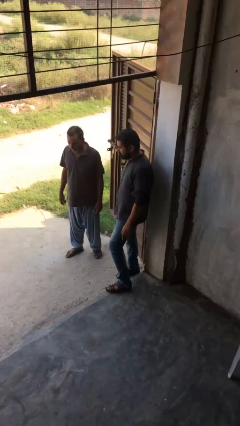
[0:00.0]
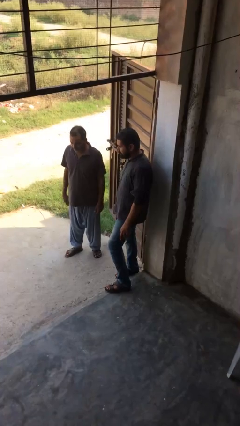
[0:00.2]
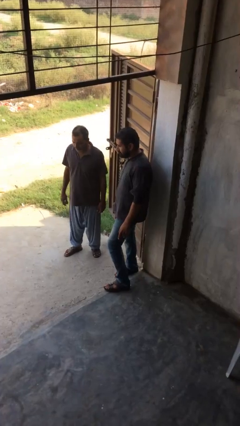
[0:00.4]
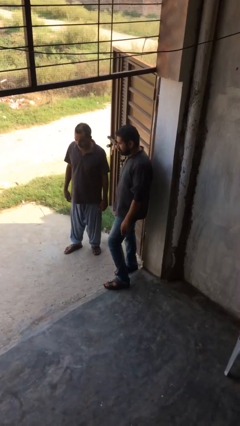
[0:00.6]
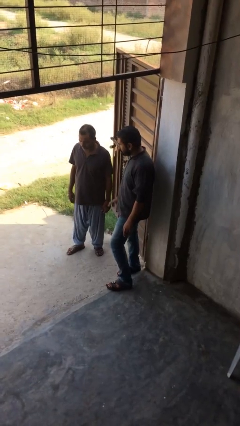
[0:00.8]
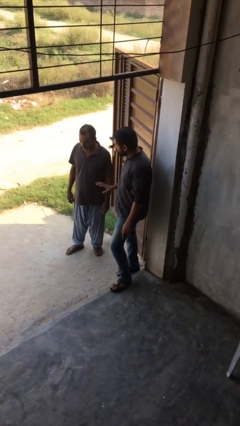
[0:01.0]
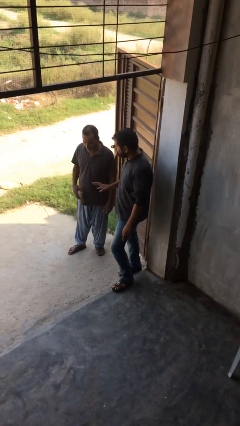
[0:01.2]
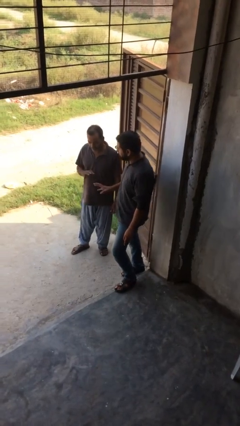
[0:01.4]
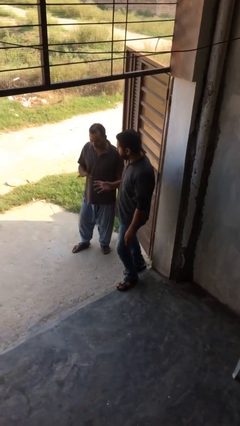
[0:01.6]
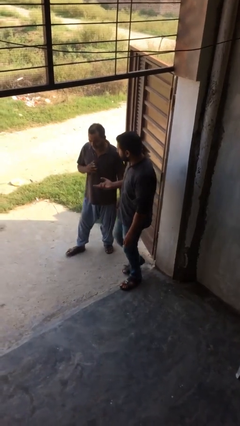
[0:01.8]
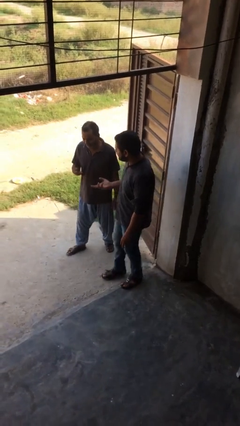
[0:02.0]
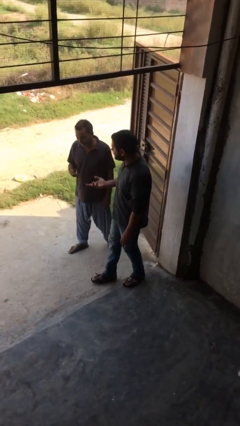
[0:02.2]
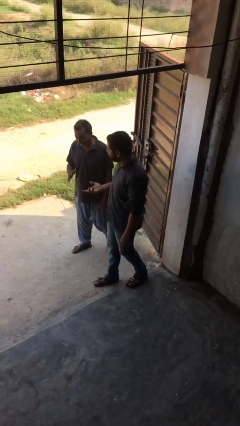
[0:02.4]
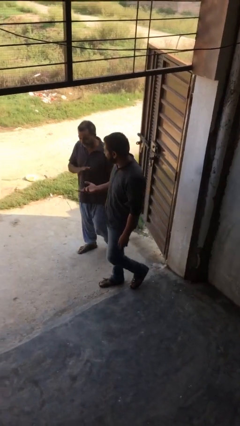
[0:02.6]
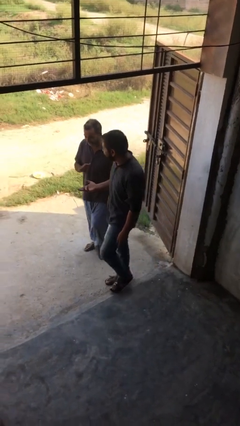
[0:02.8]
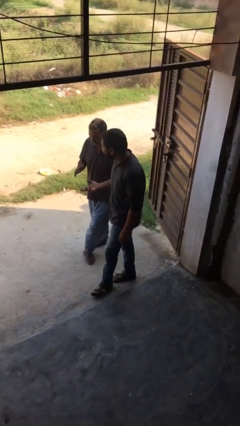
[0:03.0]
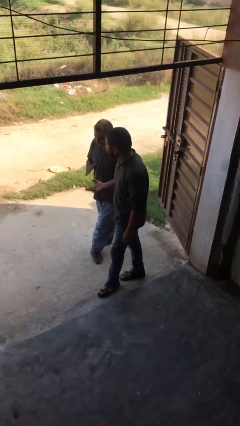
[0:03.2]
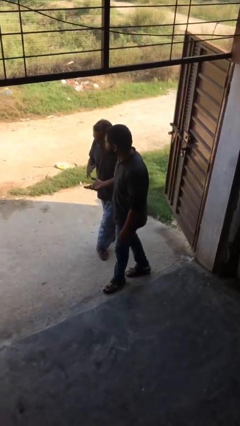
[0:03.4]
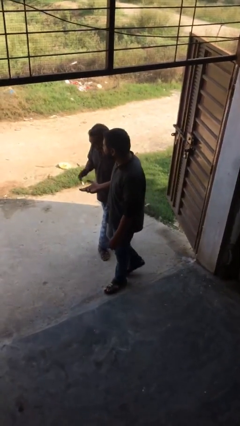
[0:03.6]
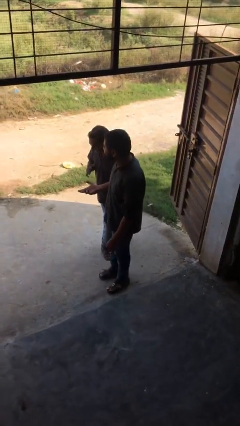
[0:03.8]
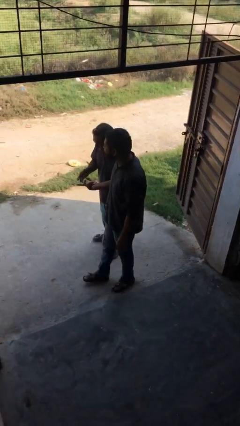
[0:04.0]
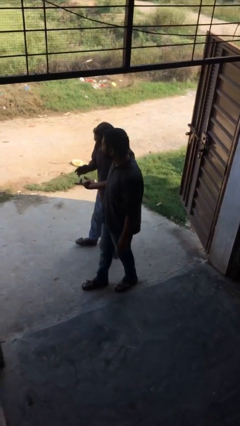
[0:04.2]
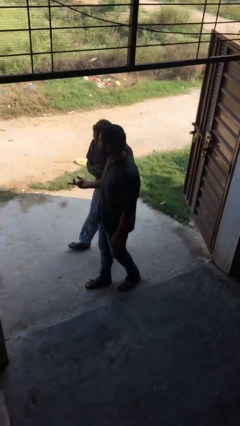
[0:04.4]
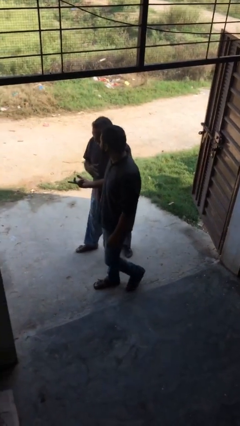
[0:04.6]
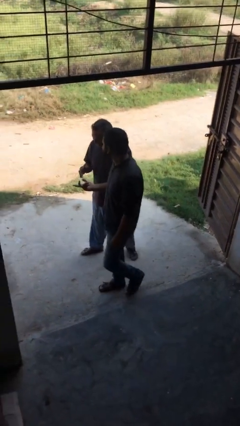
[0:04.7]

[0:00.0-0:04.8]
person talks to person

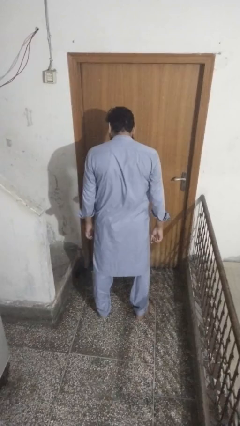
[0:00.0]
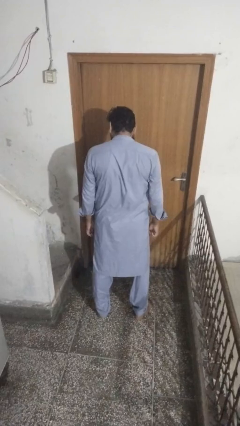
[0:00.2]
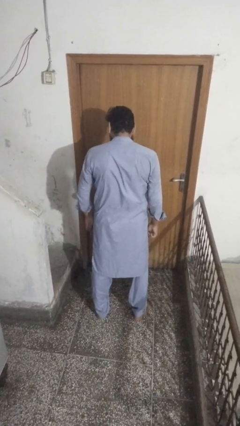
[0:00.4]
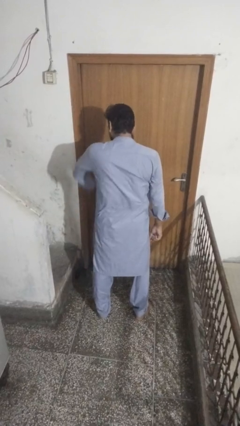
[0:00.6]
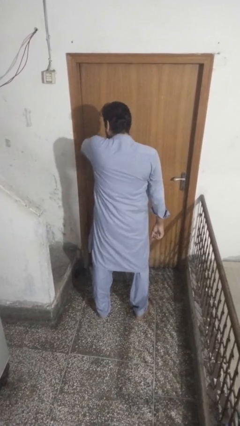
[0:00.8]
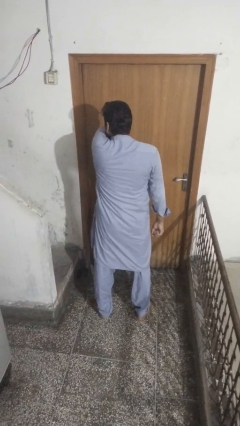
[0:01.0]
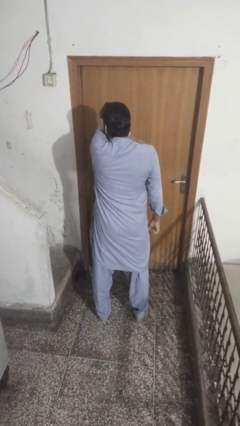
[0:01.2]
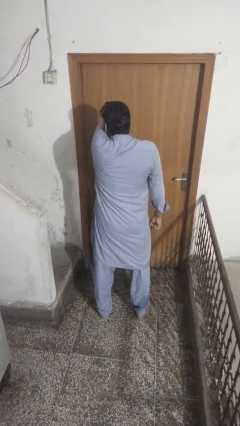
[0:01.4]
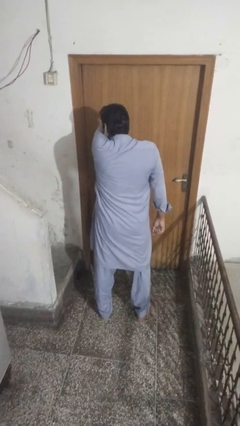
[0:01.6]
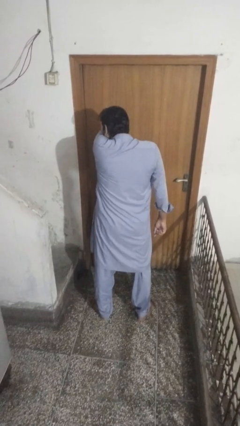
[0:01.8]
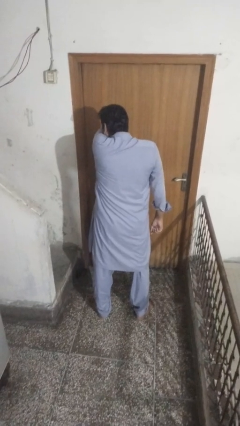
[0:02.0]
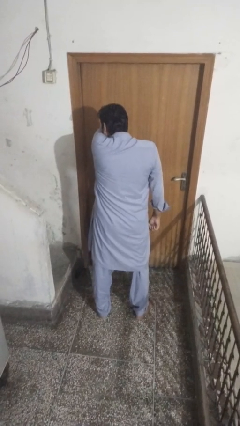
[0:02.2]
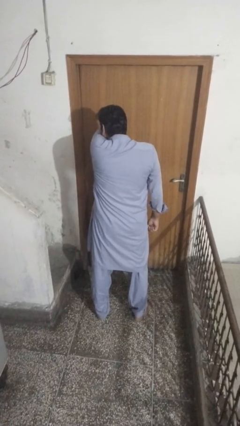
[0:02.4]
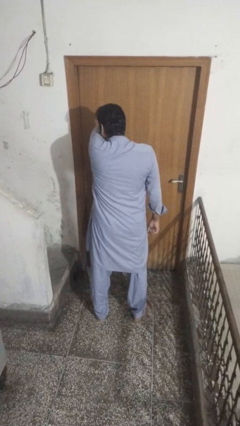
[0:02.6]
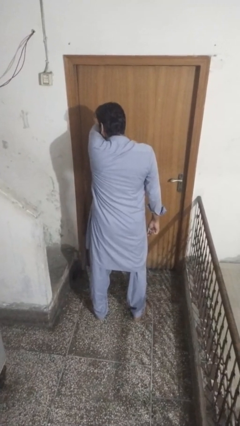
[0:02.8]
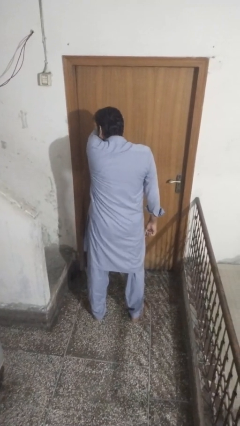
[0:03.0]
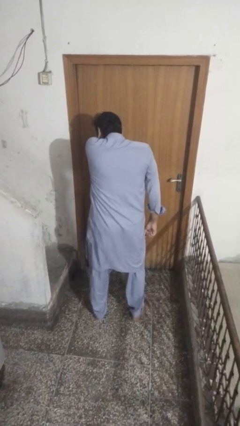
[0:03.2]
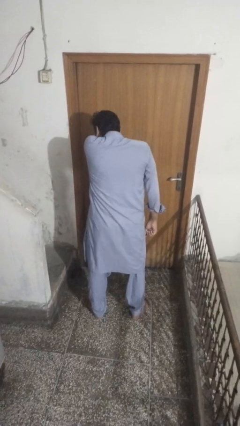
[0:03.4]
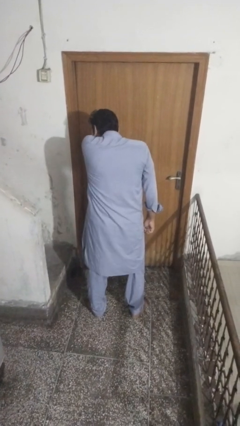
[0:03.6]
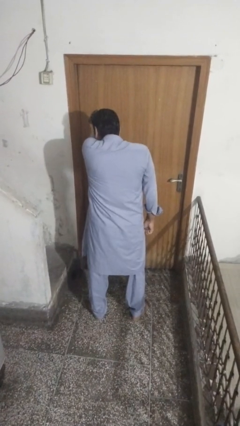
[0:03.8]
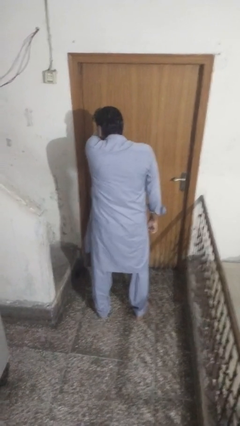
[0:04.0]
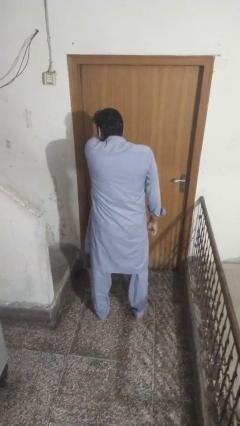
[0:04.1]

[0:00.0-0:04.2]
person sneezes into arm

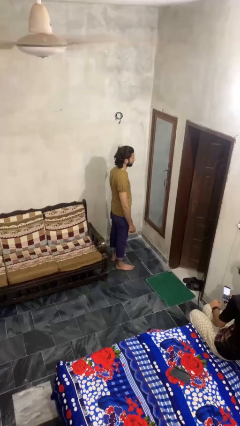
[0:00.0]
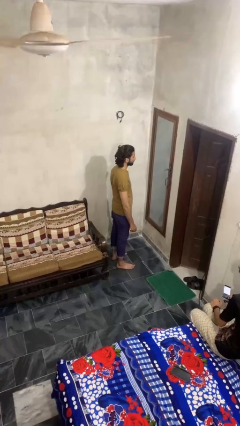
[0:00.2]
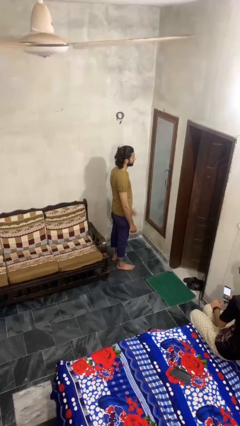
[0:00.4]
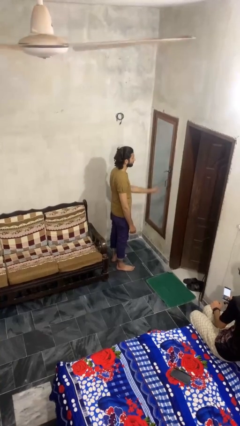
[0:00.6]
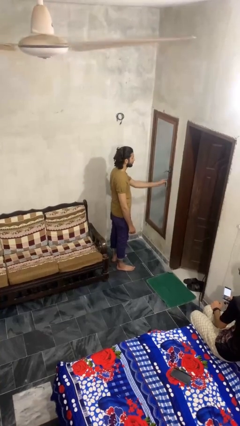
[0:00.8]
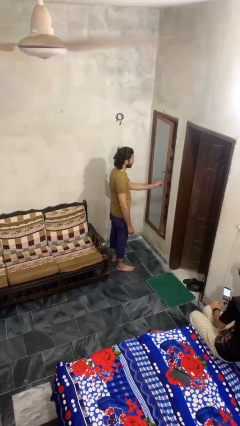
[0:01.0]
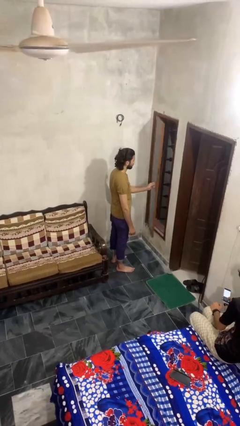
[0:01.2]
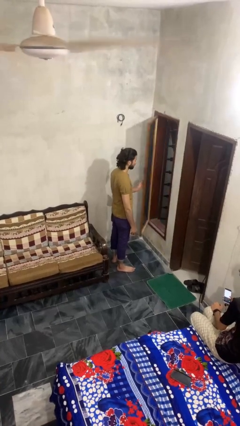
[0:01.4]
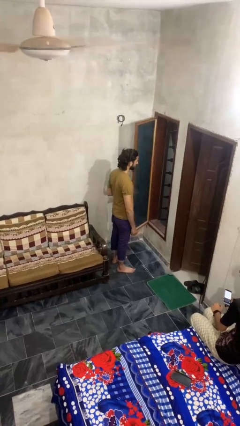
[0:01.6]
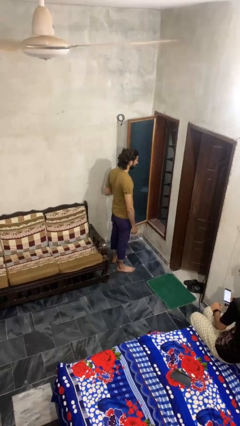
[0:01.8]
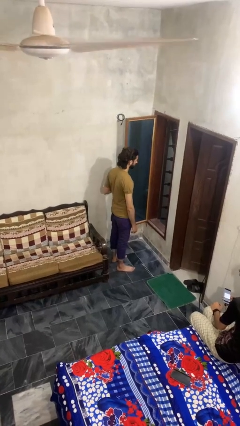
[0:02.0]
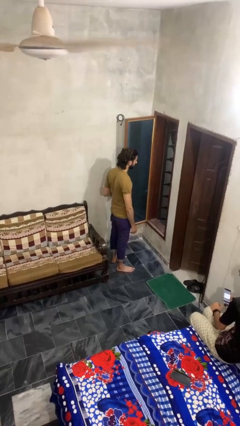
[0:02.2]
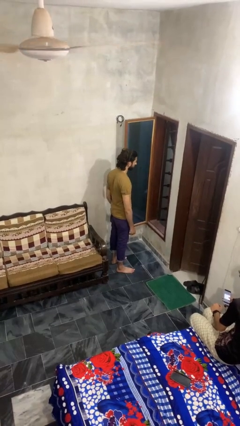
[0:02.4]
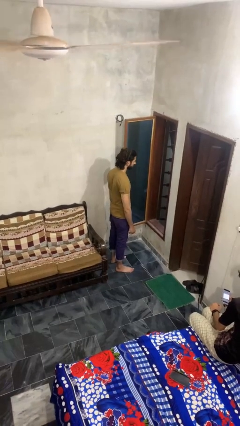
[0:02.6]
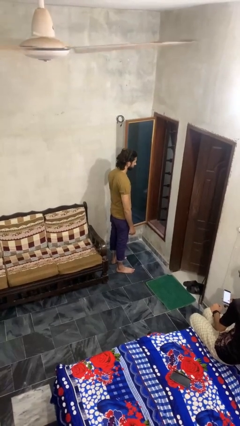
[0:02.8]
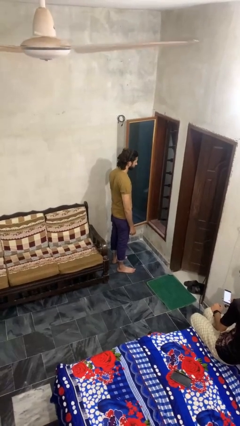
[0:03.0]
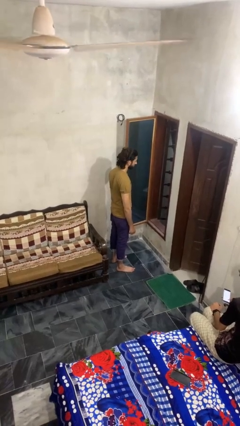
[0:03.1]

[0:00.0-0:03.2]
person opens home window

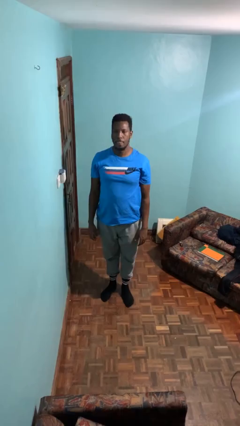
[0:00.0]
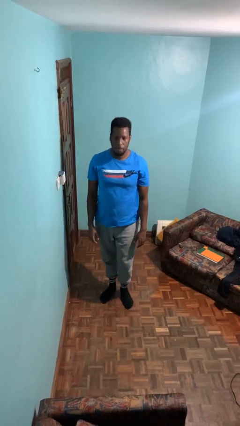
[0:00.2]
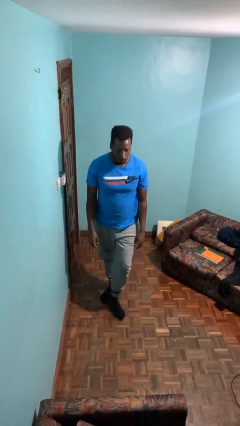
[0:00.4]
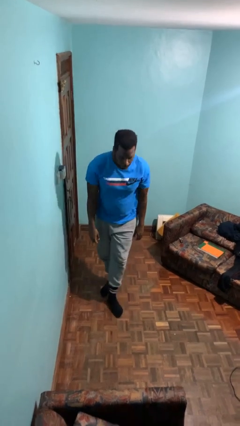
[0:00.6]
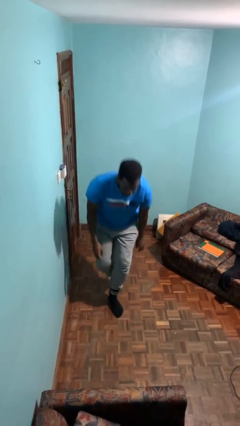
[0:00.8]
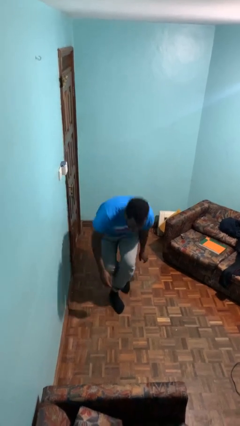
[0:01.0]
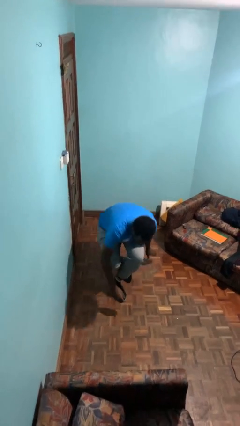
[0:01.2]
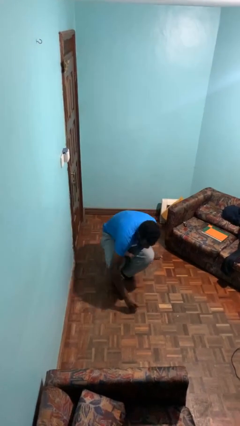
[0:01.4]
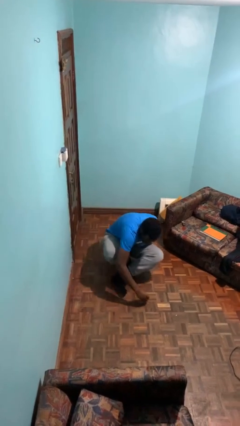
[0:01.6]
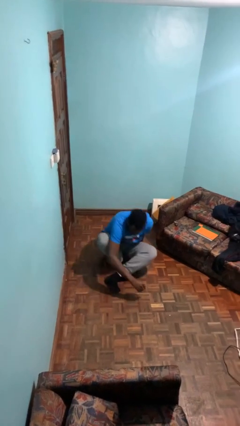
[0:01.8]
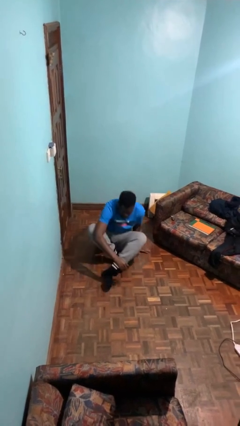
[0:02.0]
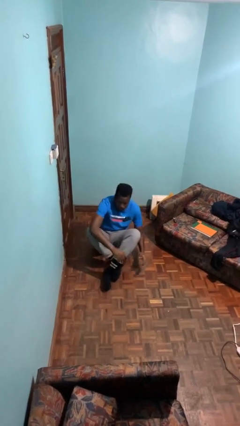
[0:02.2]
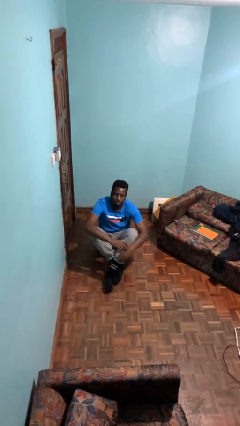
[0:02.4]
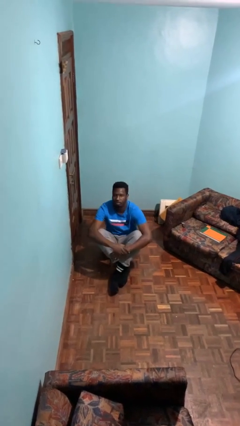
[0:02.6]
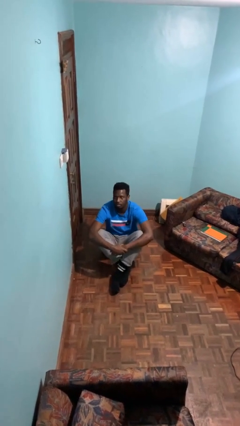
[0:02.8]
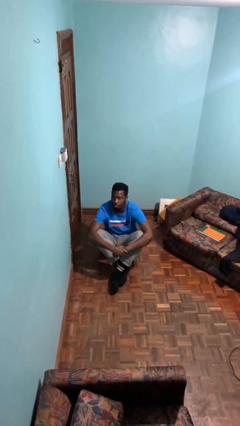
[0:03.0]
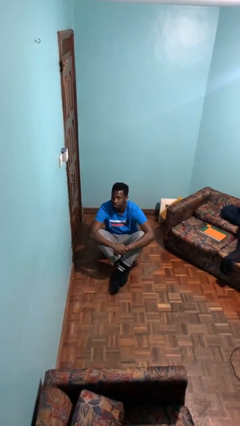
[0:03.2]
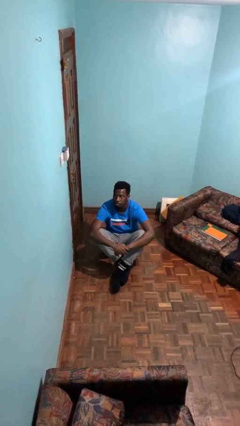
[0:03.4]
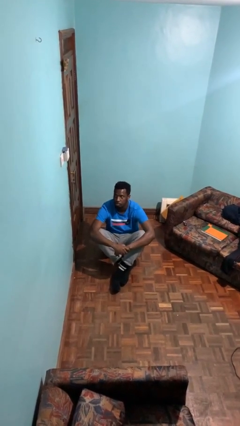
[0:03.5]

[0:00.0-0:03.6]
person sits crisscross

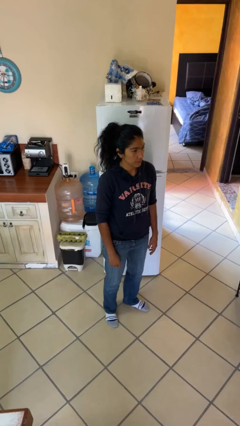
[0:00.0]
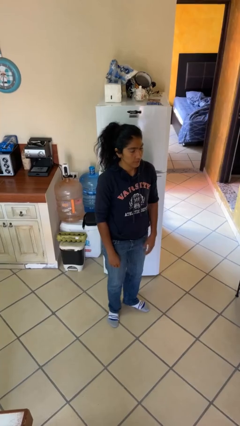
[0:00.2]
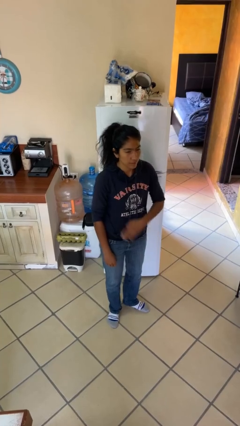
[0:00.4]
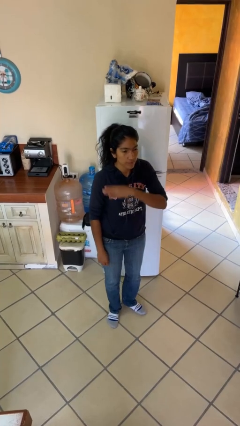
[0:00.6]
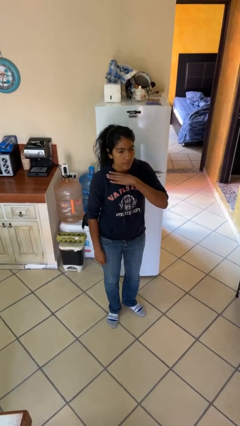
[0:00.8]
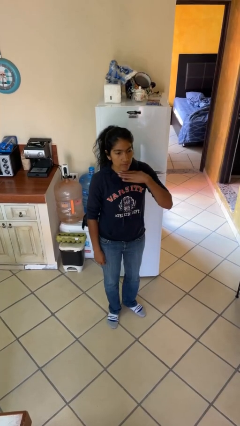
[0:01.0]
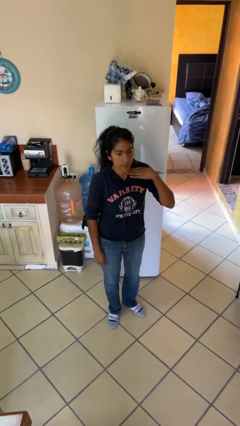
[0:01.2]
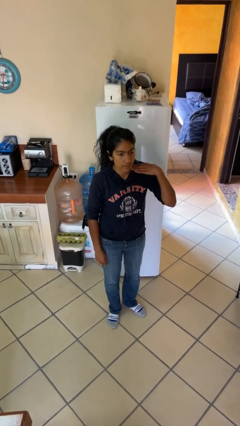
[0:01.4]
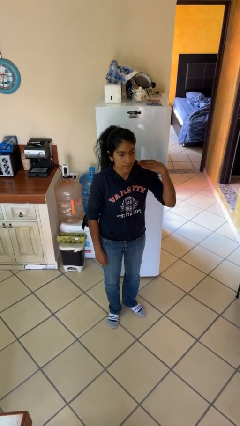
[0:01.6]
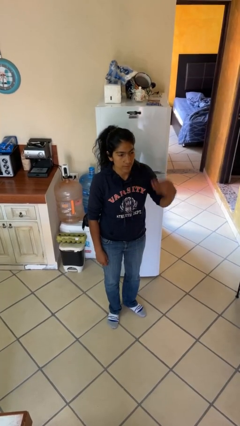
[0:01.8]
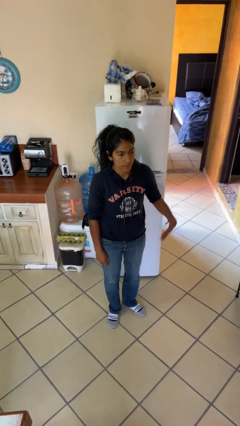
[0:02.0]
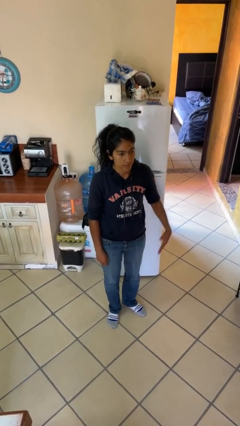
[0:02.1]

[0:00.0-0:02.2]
person gestures cut
